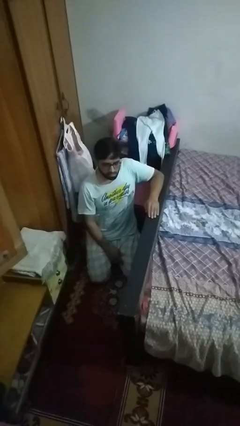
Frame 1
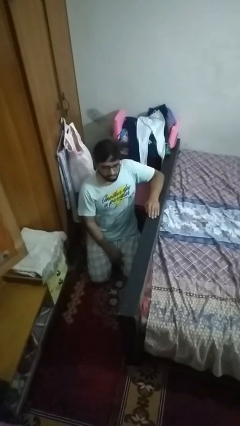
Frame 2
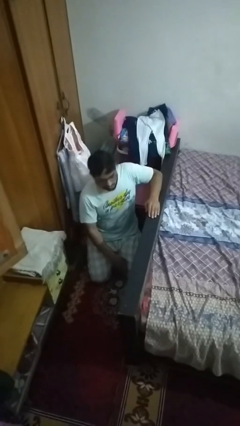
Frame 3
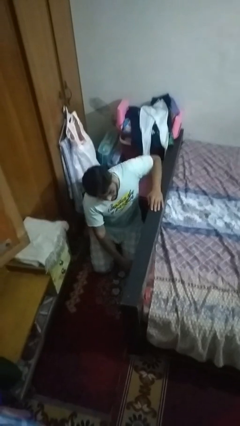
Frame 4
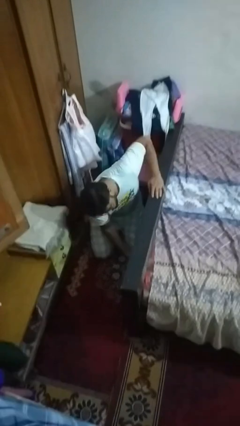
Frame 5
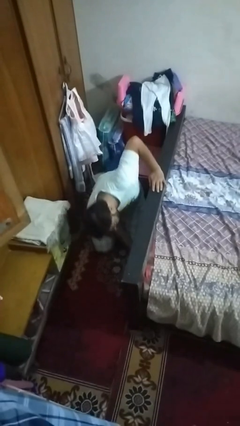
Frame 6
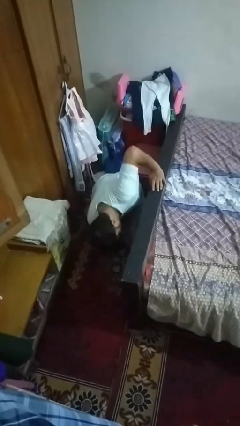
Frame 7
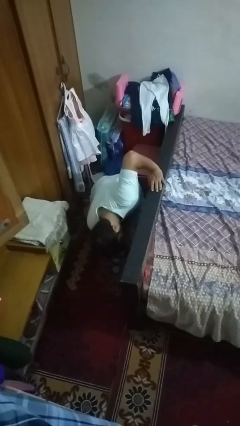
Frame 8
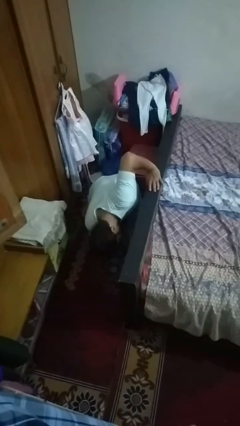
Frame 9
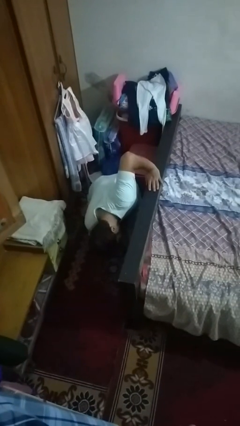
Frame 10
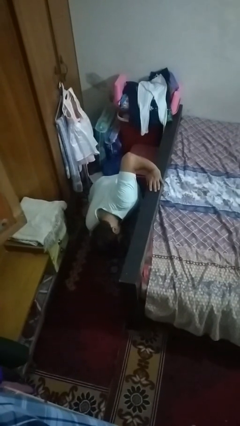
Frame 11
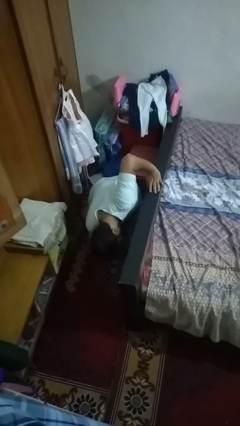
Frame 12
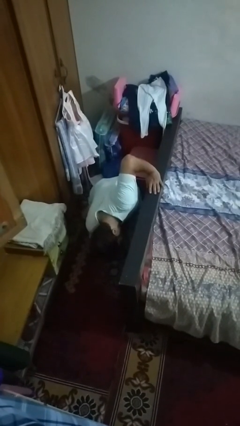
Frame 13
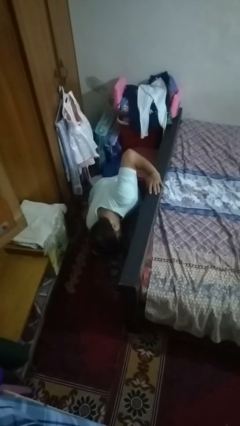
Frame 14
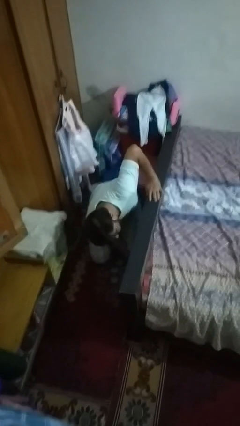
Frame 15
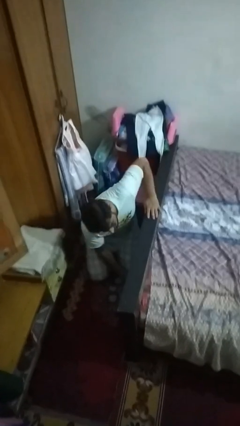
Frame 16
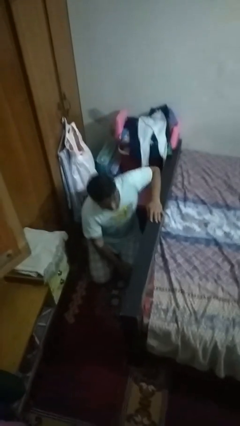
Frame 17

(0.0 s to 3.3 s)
person searches under bed

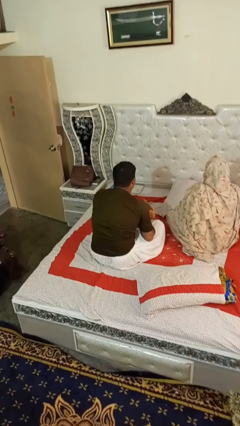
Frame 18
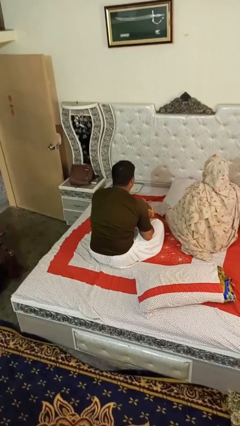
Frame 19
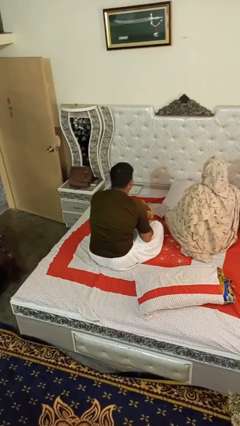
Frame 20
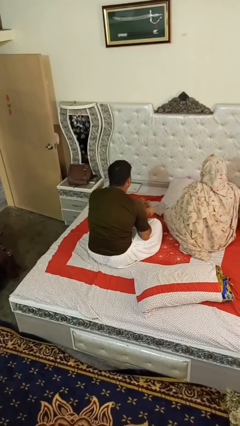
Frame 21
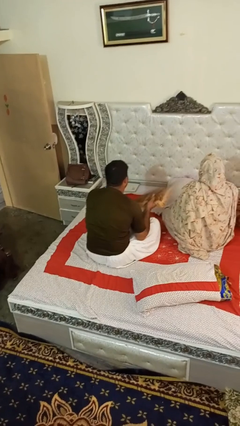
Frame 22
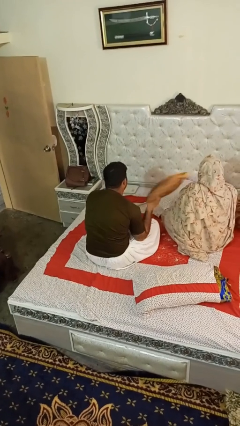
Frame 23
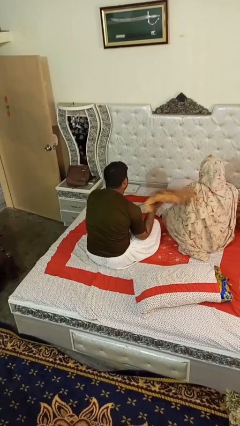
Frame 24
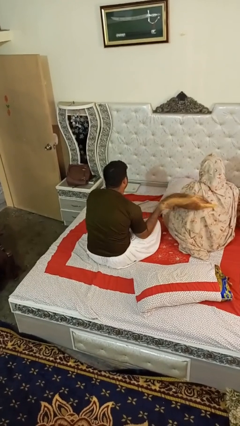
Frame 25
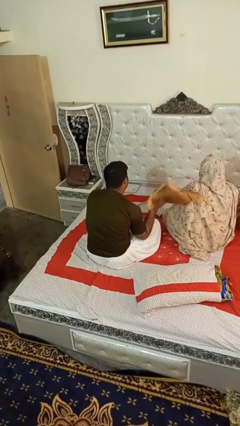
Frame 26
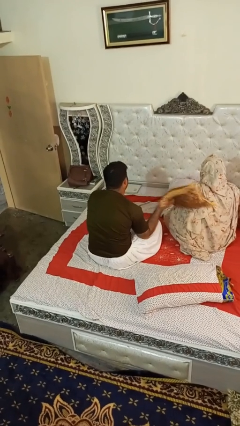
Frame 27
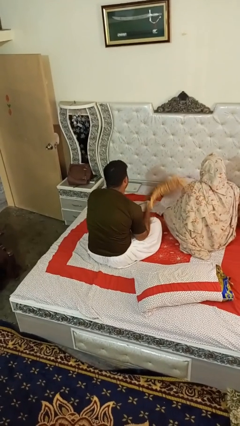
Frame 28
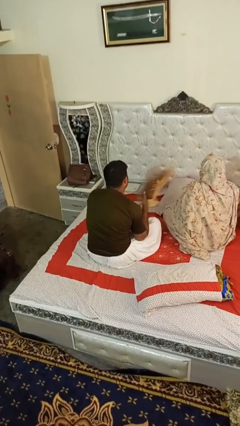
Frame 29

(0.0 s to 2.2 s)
person hits person with pillow

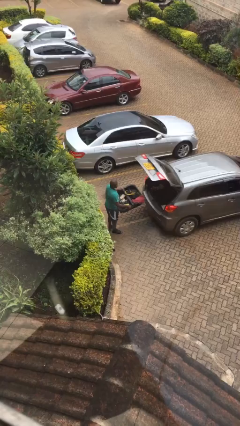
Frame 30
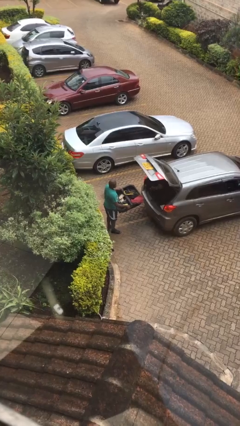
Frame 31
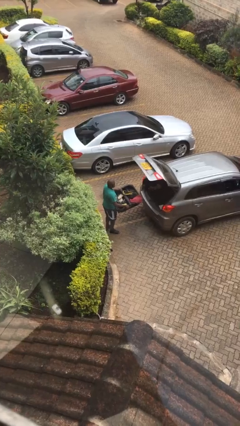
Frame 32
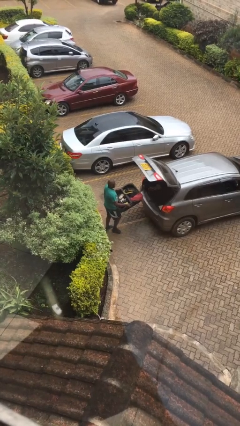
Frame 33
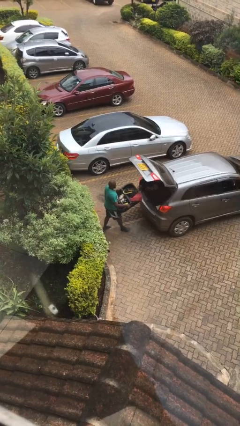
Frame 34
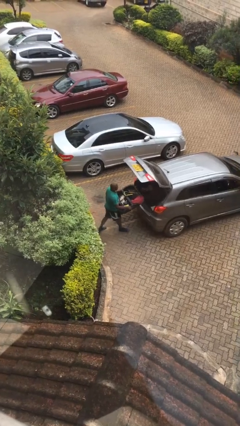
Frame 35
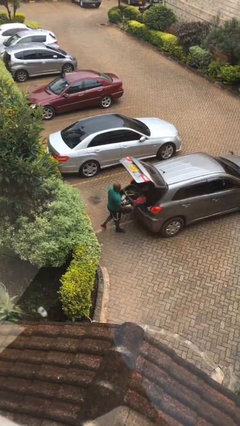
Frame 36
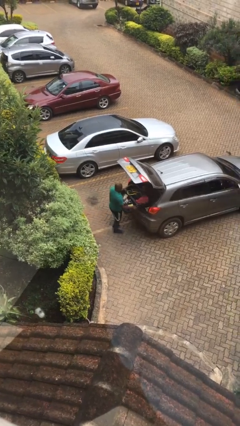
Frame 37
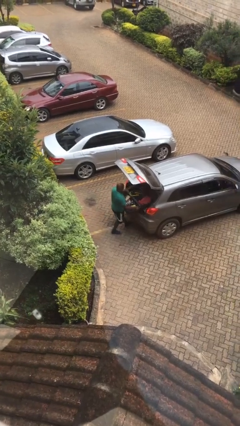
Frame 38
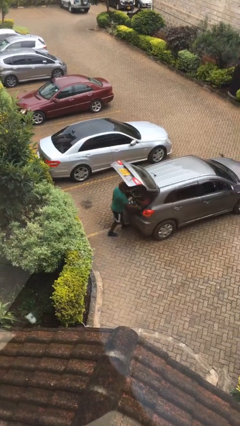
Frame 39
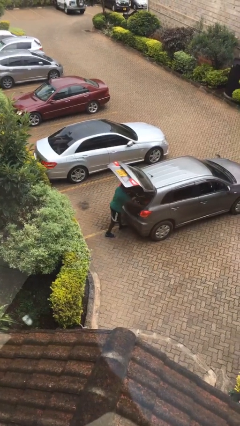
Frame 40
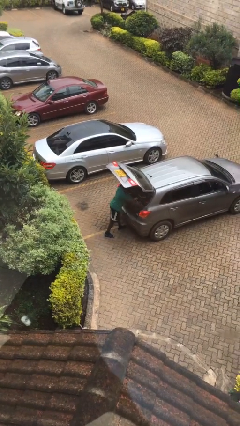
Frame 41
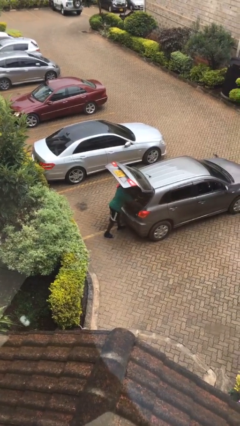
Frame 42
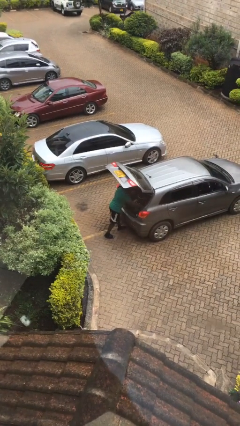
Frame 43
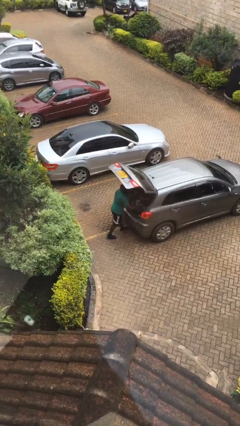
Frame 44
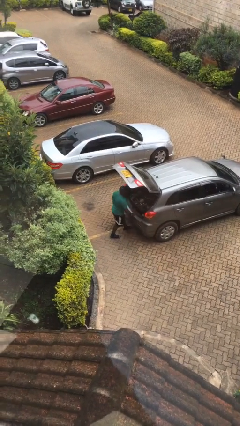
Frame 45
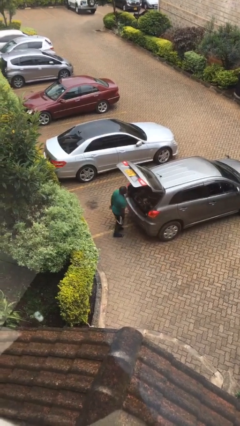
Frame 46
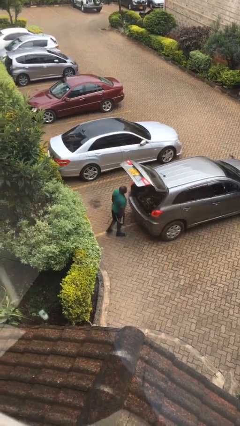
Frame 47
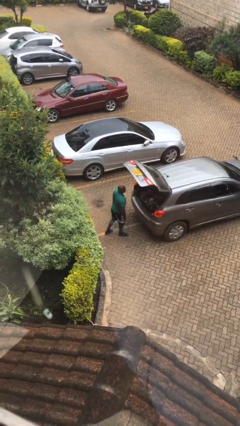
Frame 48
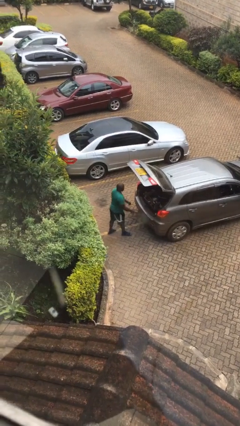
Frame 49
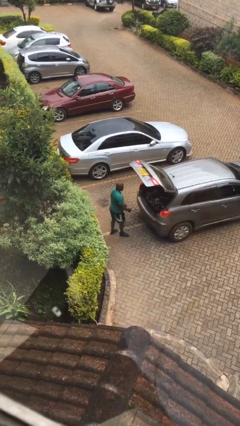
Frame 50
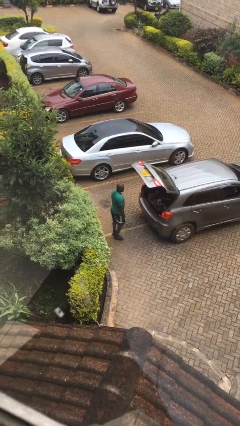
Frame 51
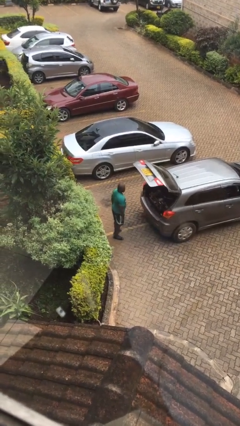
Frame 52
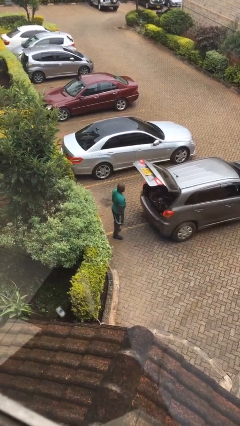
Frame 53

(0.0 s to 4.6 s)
person loads car

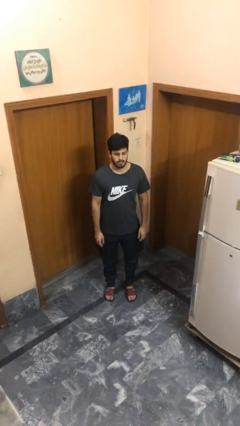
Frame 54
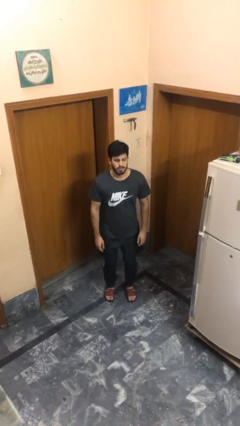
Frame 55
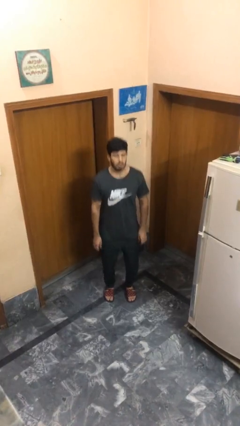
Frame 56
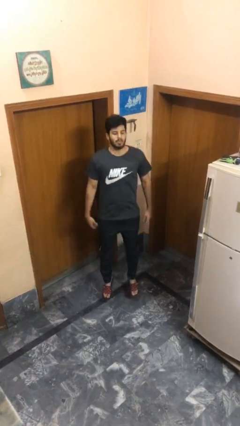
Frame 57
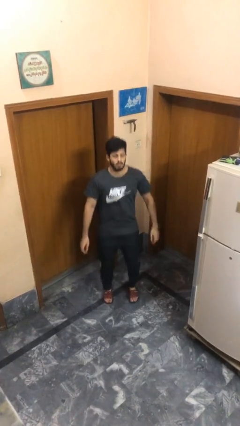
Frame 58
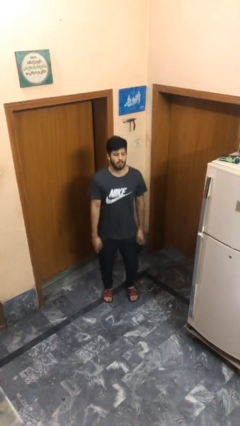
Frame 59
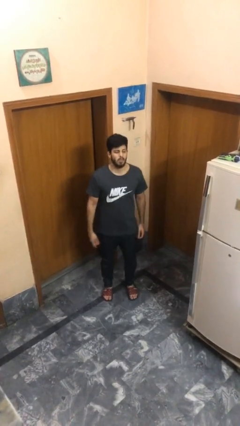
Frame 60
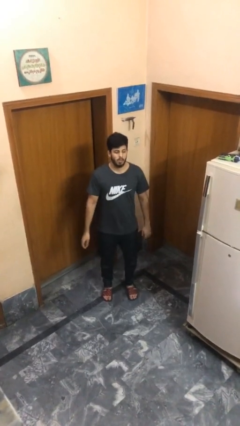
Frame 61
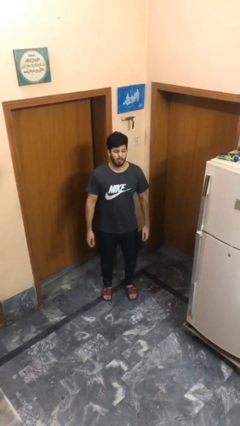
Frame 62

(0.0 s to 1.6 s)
person jumps

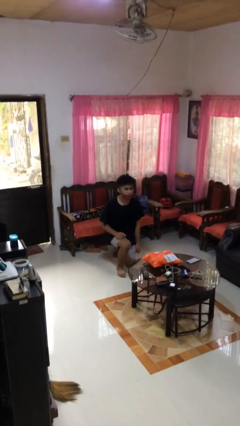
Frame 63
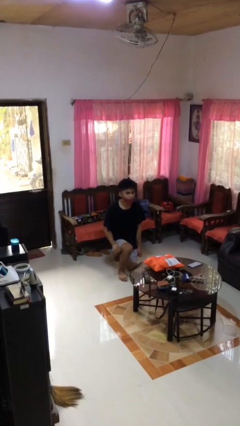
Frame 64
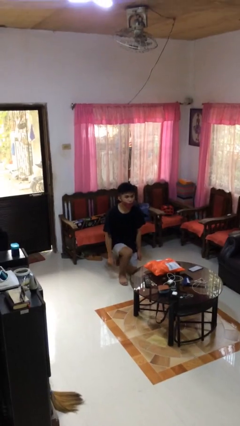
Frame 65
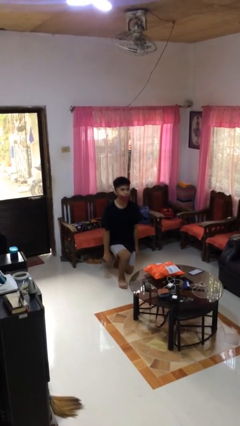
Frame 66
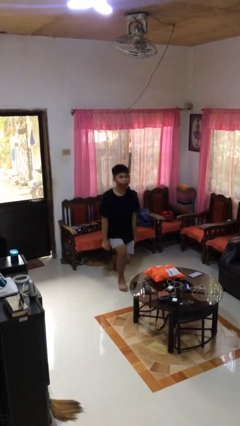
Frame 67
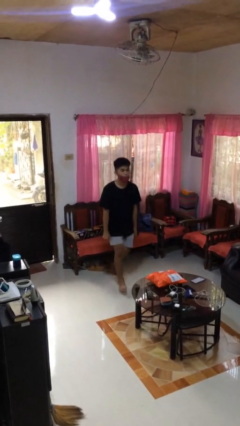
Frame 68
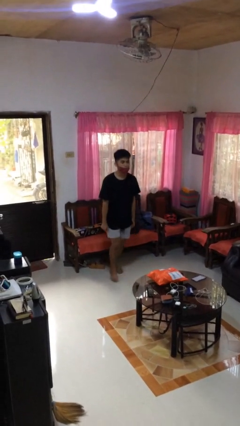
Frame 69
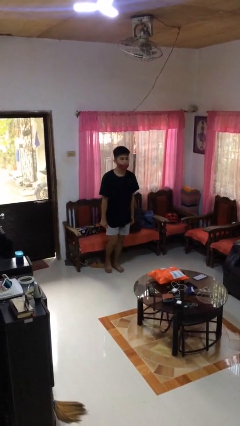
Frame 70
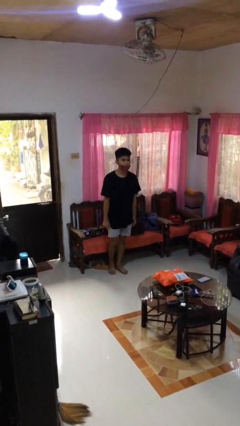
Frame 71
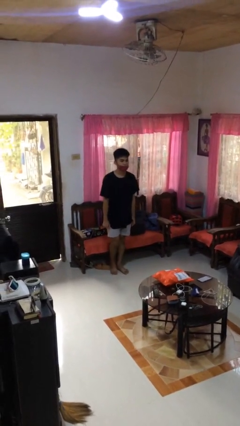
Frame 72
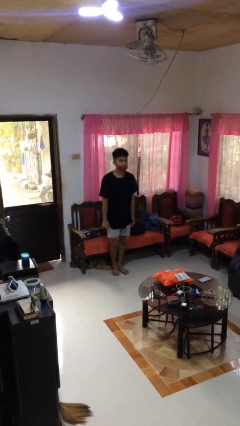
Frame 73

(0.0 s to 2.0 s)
person stands up from floor

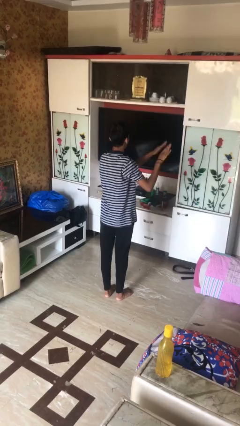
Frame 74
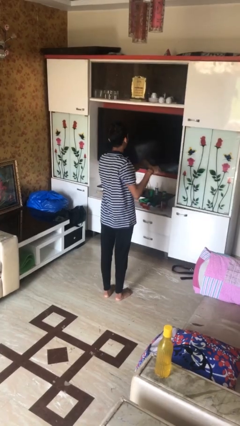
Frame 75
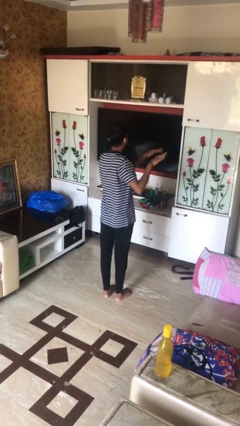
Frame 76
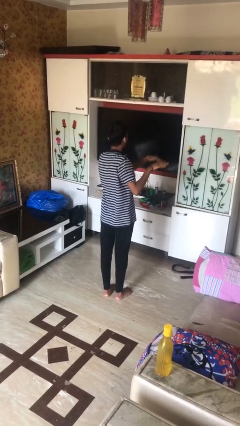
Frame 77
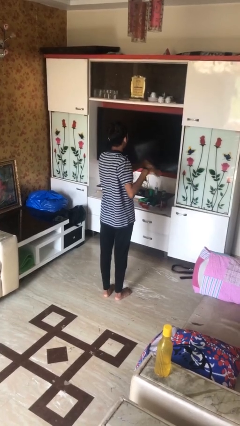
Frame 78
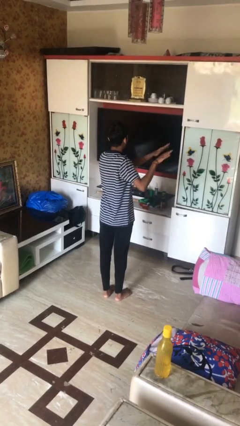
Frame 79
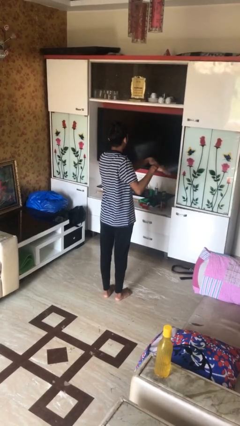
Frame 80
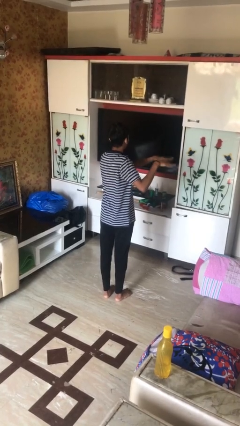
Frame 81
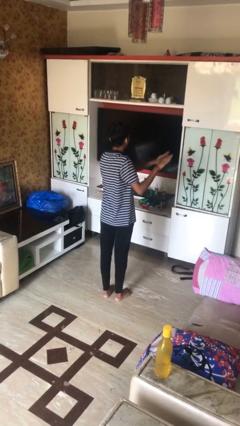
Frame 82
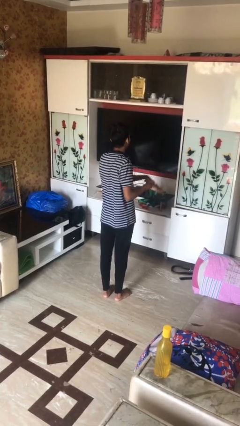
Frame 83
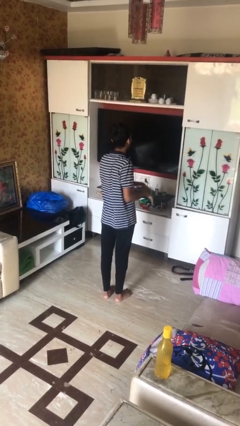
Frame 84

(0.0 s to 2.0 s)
person dances in place

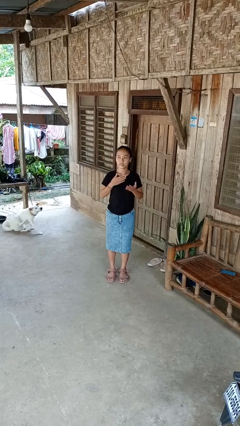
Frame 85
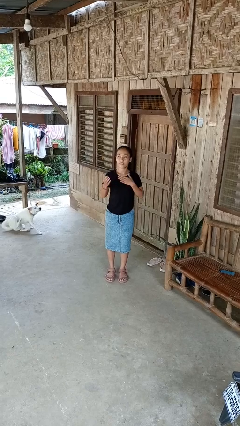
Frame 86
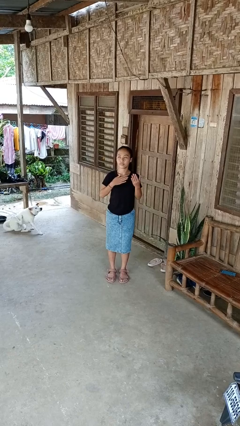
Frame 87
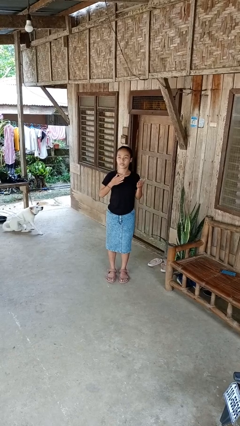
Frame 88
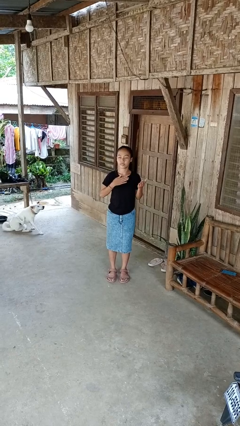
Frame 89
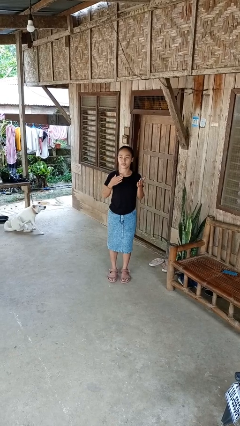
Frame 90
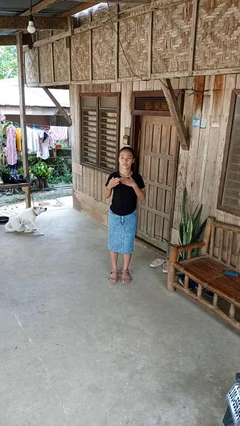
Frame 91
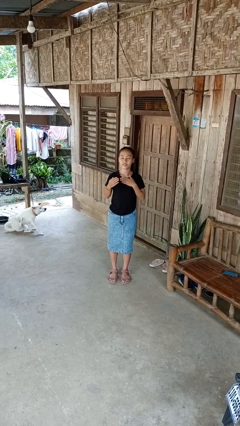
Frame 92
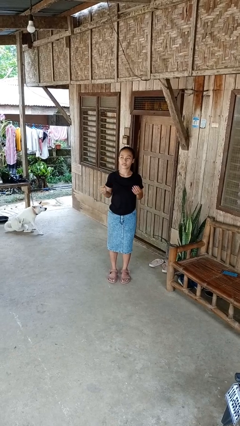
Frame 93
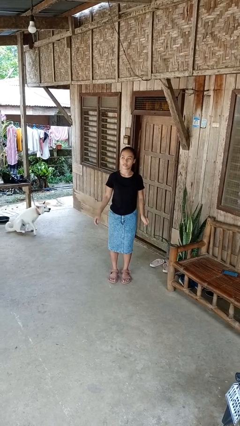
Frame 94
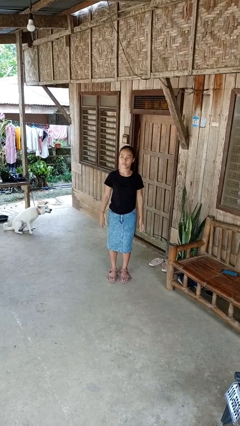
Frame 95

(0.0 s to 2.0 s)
person drums on chest
